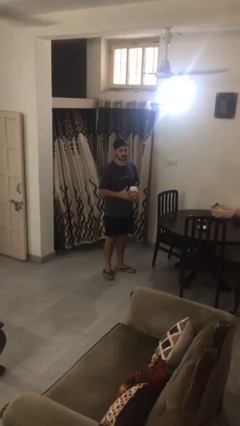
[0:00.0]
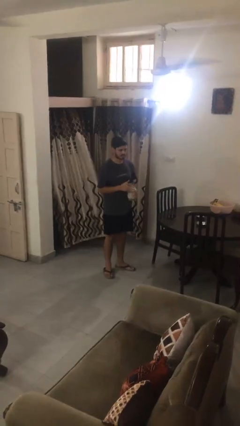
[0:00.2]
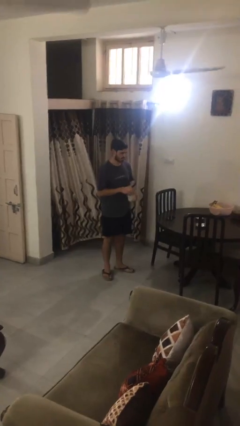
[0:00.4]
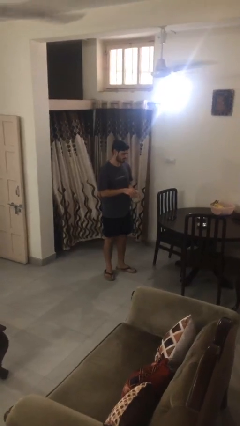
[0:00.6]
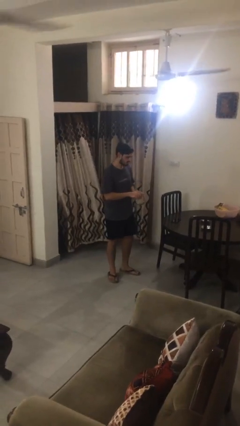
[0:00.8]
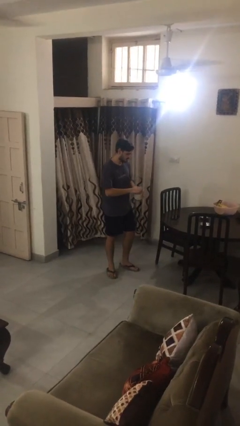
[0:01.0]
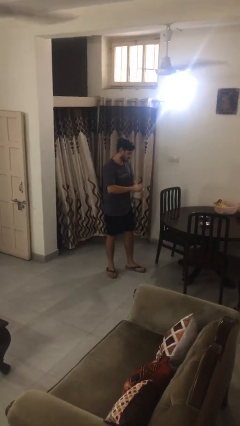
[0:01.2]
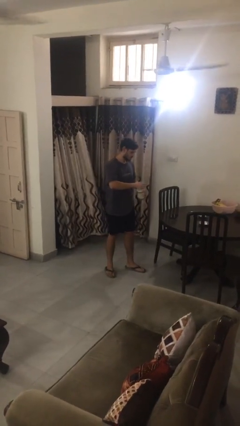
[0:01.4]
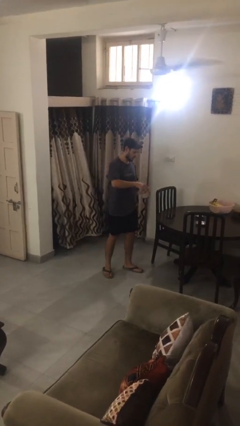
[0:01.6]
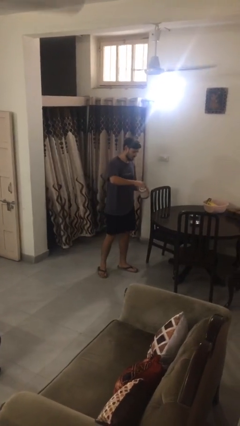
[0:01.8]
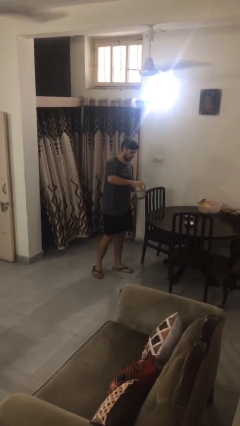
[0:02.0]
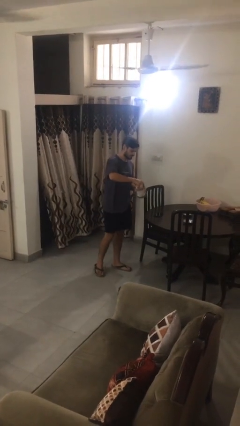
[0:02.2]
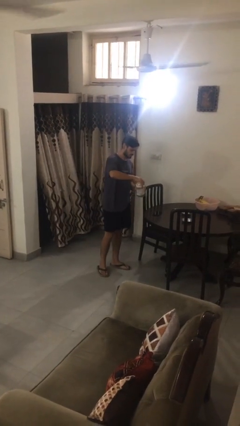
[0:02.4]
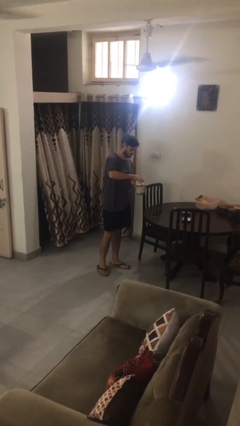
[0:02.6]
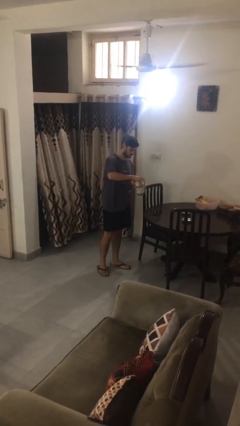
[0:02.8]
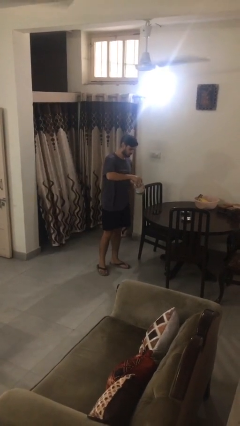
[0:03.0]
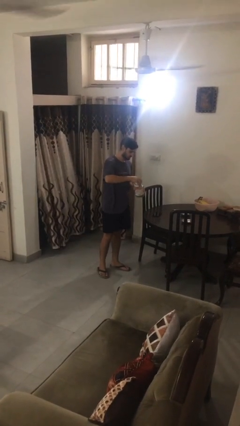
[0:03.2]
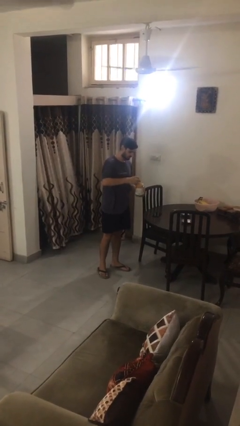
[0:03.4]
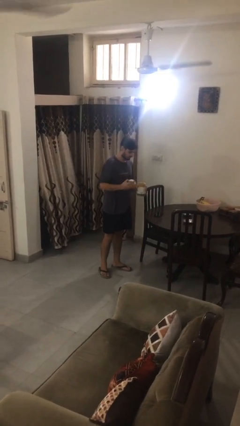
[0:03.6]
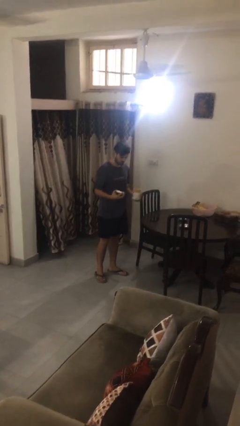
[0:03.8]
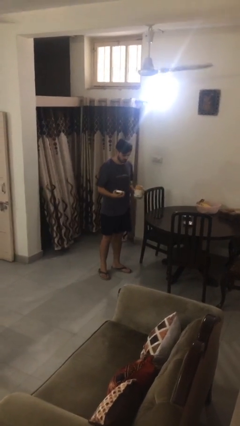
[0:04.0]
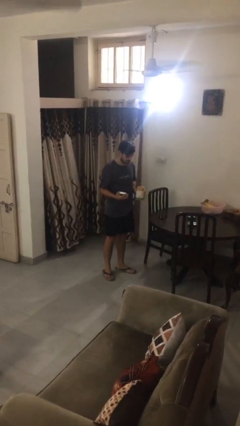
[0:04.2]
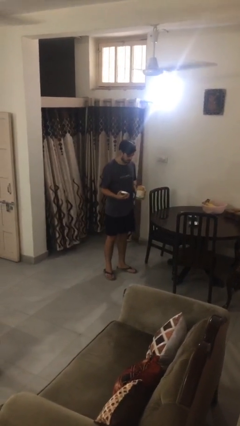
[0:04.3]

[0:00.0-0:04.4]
person opens jar

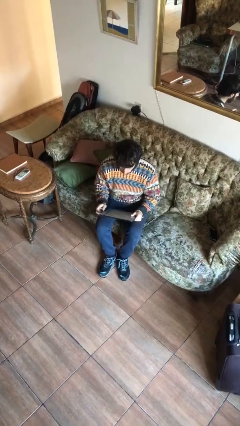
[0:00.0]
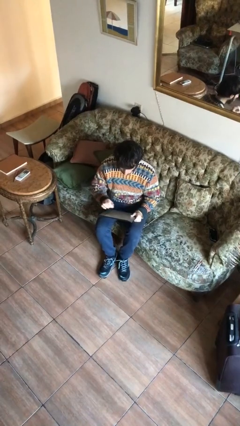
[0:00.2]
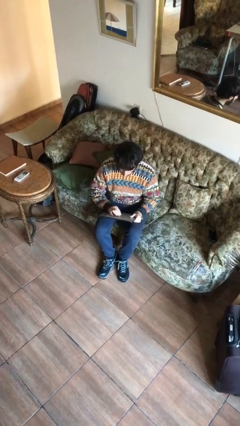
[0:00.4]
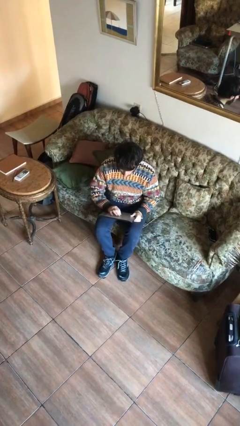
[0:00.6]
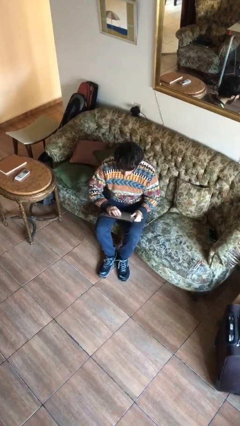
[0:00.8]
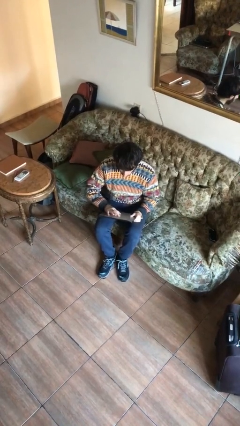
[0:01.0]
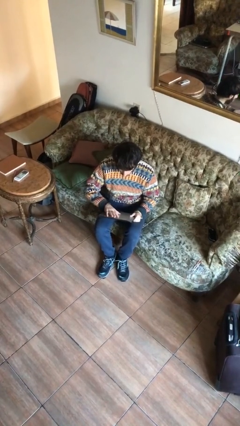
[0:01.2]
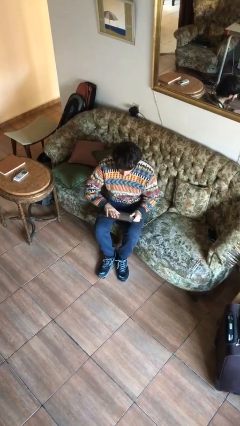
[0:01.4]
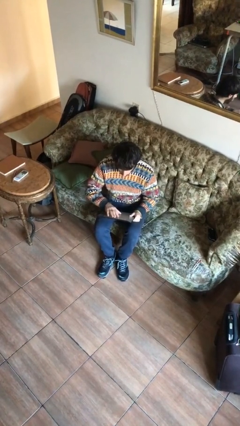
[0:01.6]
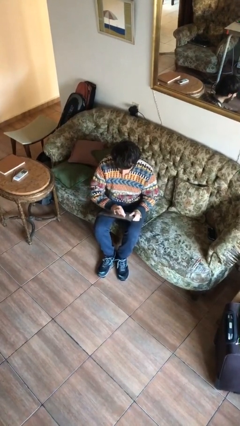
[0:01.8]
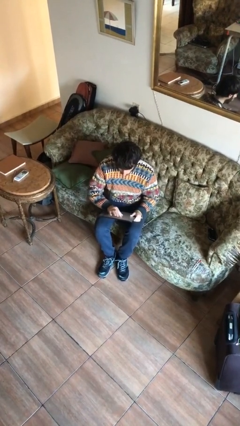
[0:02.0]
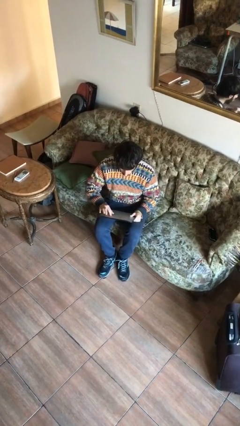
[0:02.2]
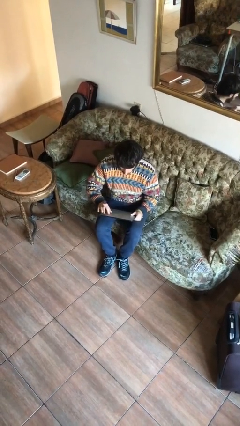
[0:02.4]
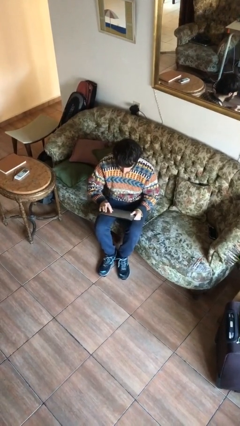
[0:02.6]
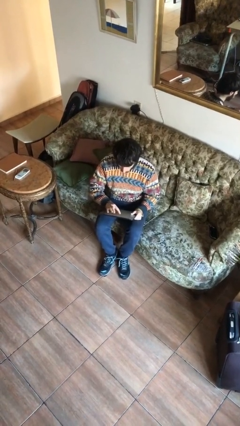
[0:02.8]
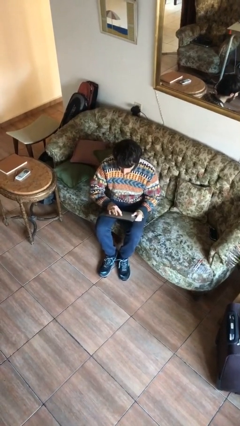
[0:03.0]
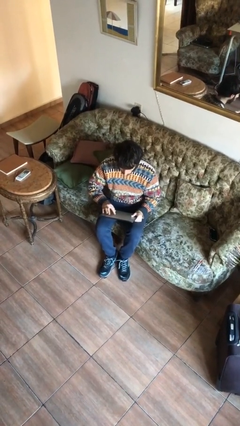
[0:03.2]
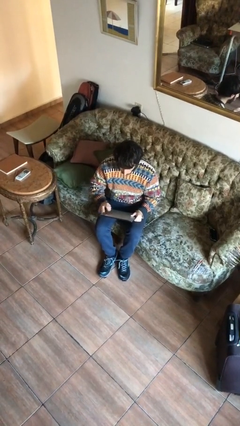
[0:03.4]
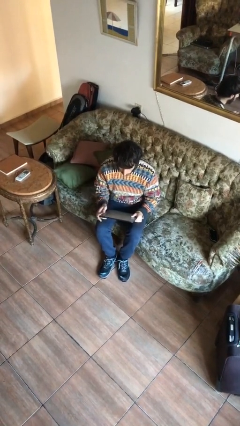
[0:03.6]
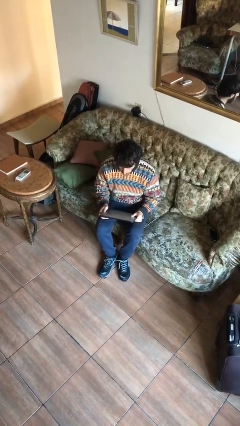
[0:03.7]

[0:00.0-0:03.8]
person interacts with tablet

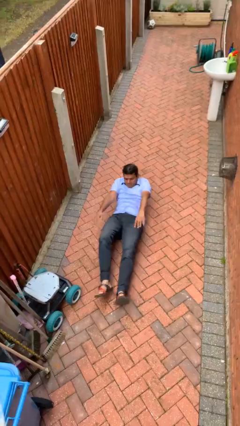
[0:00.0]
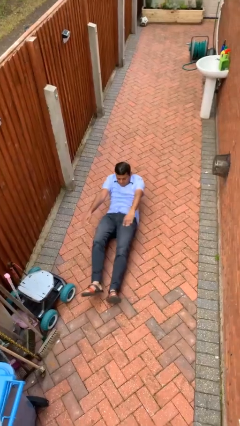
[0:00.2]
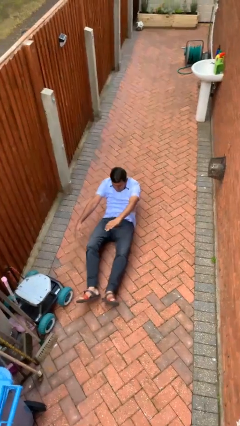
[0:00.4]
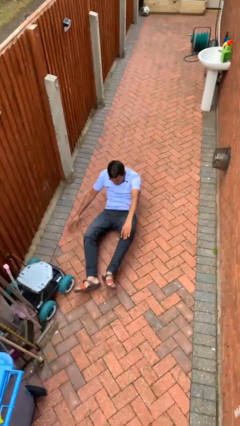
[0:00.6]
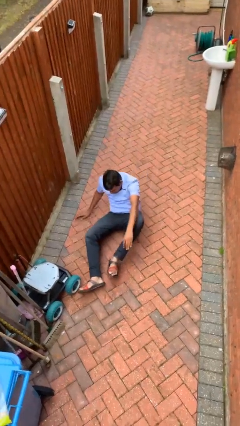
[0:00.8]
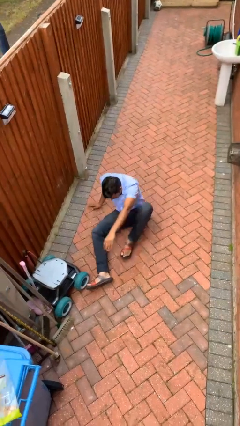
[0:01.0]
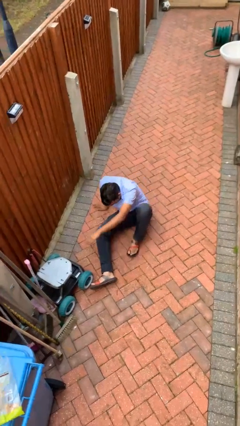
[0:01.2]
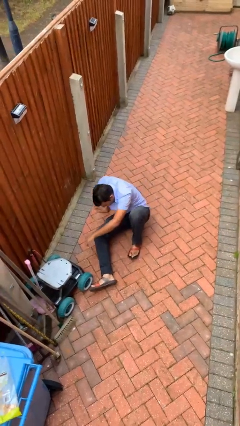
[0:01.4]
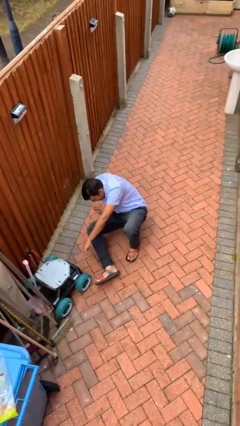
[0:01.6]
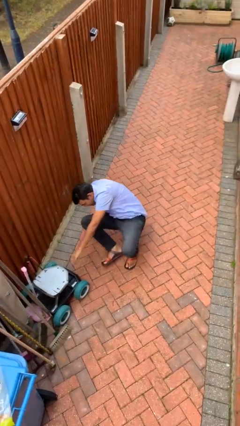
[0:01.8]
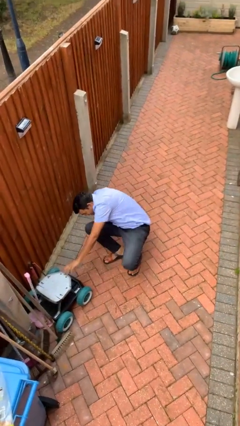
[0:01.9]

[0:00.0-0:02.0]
person lies down on floor

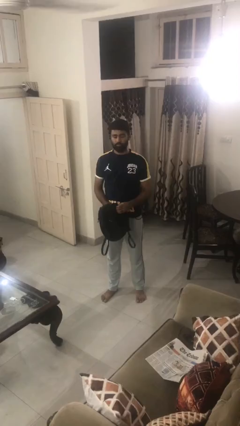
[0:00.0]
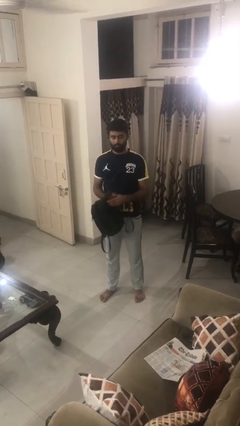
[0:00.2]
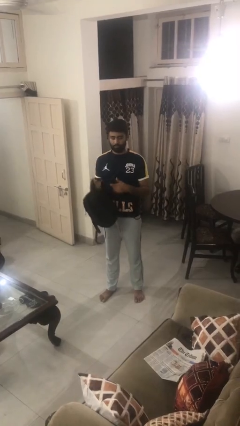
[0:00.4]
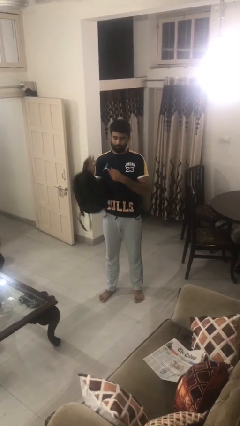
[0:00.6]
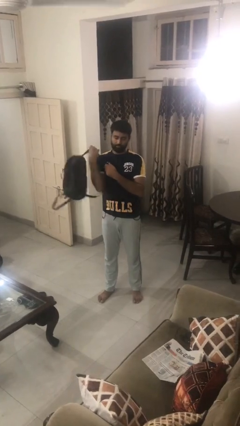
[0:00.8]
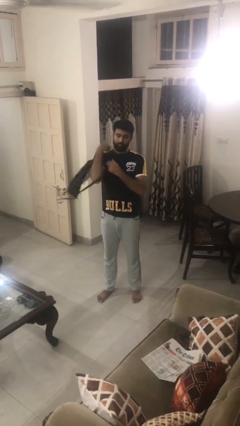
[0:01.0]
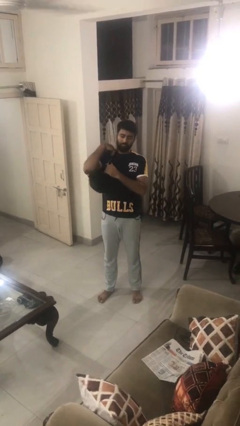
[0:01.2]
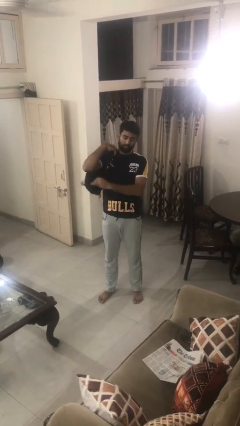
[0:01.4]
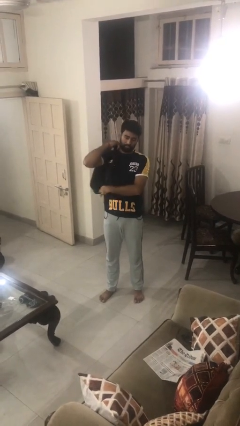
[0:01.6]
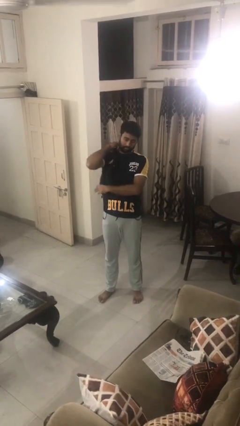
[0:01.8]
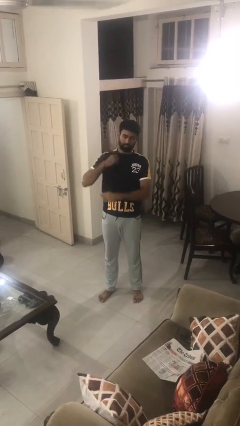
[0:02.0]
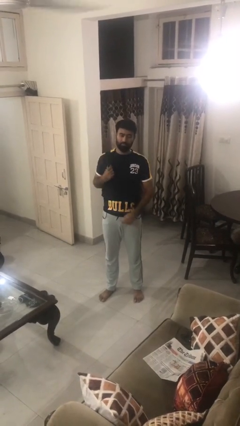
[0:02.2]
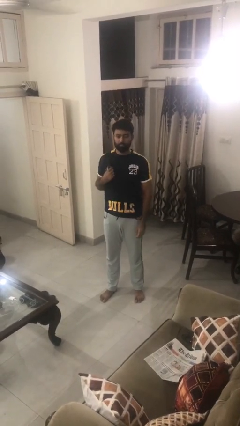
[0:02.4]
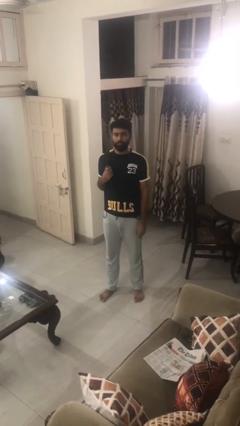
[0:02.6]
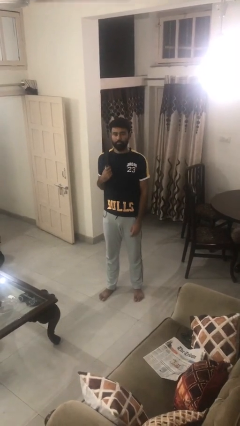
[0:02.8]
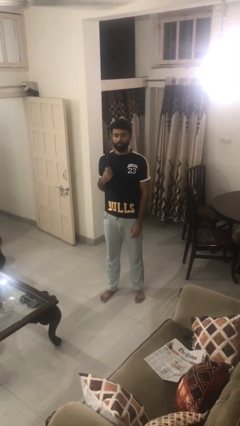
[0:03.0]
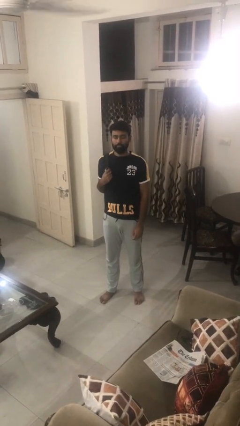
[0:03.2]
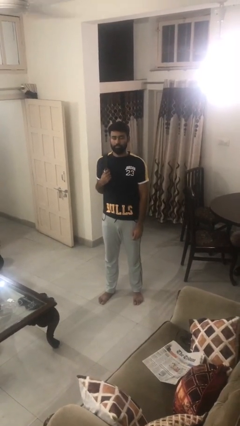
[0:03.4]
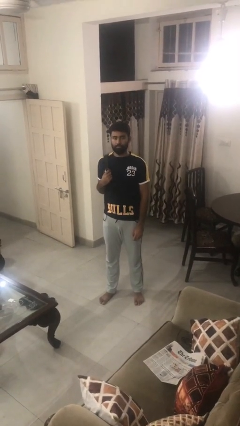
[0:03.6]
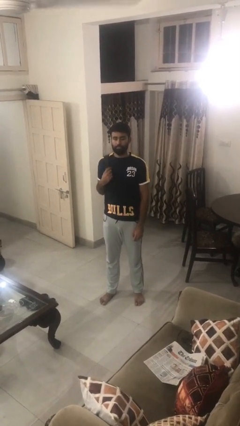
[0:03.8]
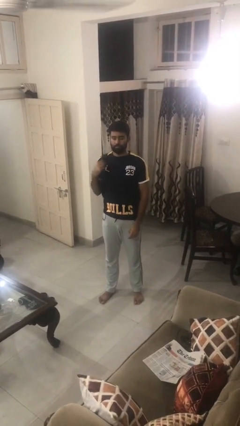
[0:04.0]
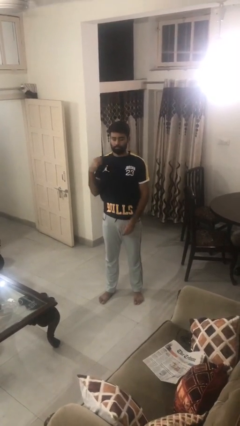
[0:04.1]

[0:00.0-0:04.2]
person puts on backpack

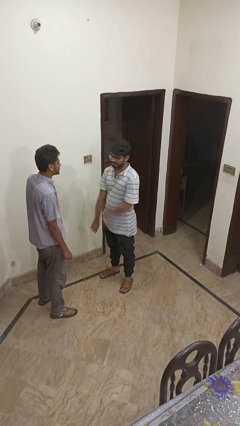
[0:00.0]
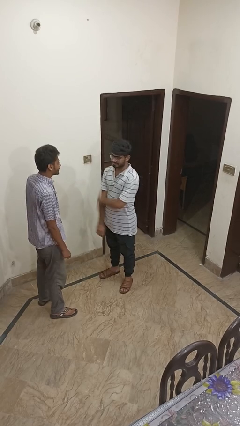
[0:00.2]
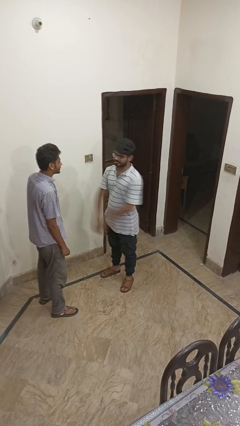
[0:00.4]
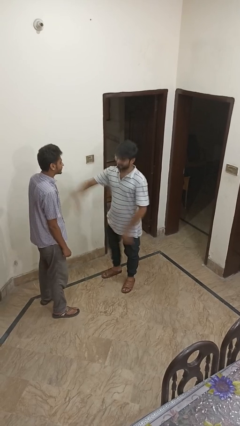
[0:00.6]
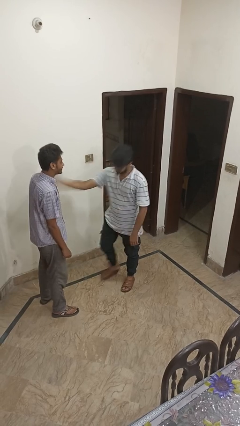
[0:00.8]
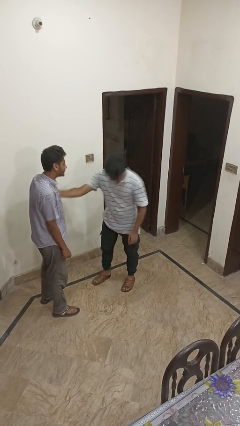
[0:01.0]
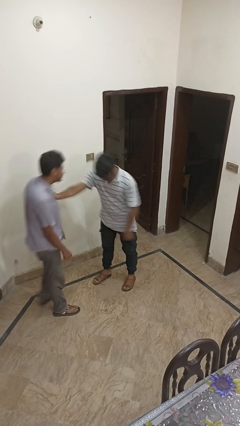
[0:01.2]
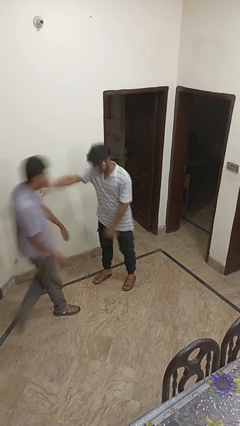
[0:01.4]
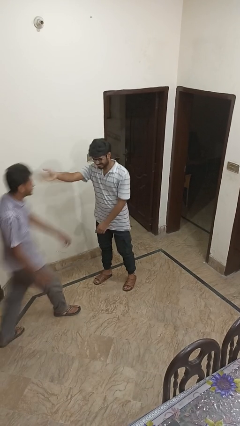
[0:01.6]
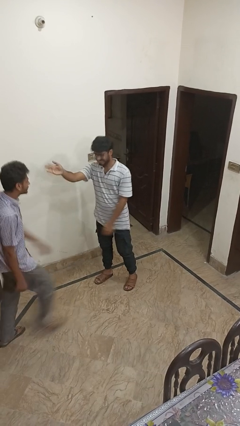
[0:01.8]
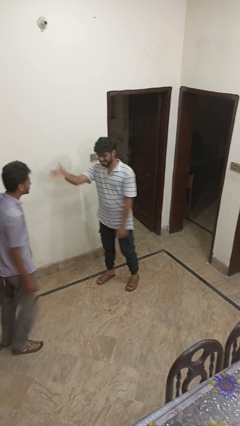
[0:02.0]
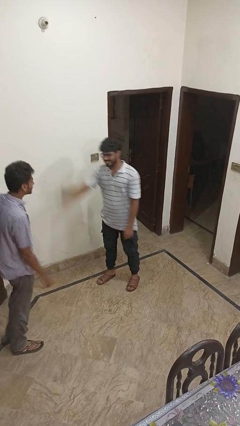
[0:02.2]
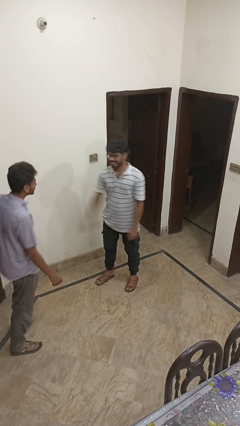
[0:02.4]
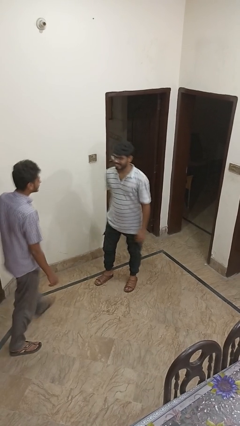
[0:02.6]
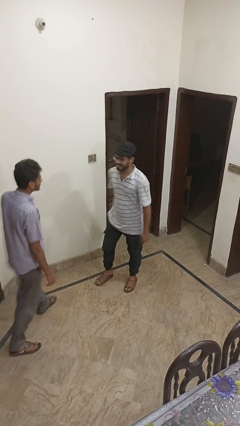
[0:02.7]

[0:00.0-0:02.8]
person shoves person

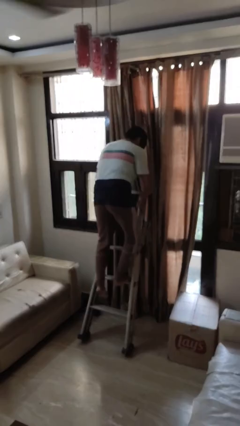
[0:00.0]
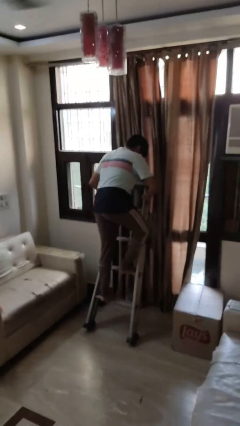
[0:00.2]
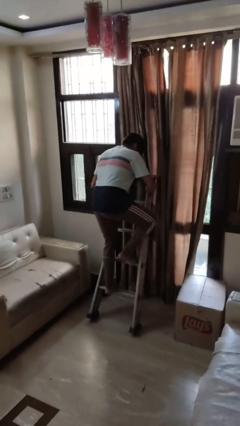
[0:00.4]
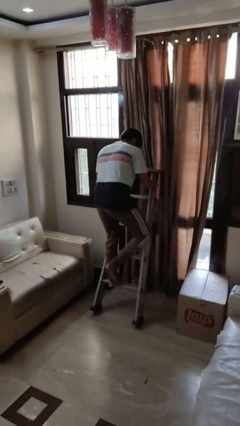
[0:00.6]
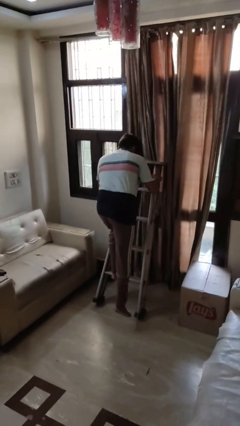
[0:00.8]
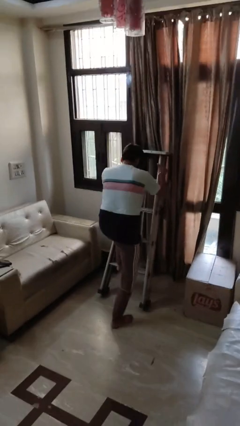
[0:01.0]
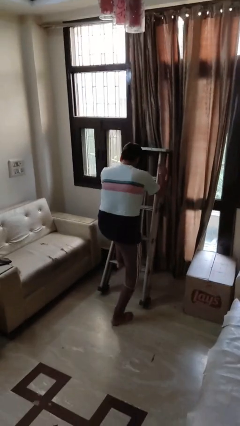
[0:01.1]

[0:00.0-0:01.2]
person climbs down ladder
